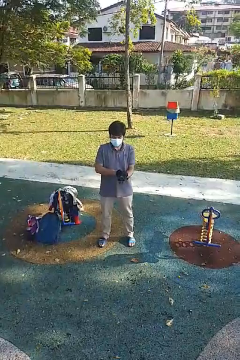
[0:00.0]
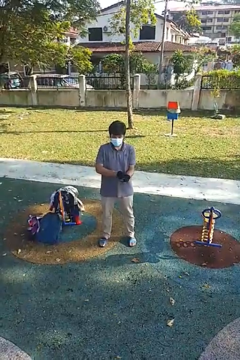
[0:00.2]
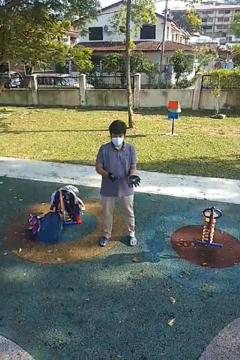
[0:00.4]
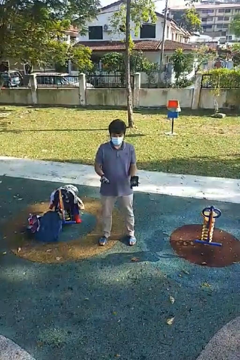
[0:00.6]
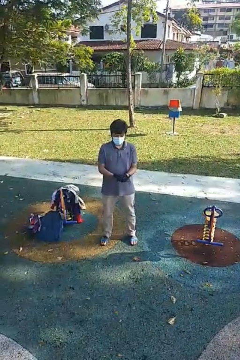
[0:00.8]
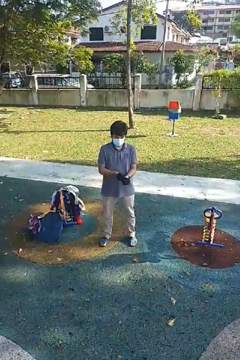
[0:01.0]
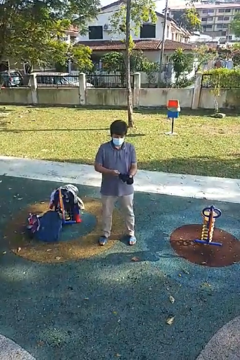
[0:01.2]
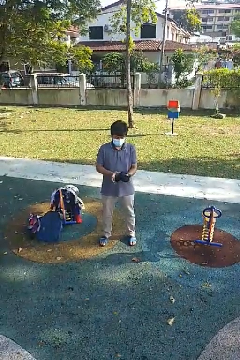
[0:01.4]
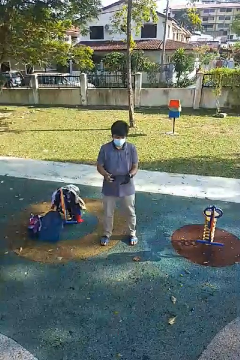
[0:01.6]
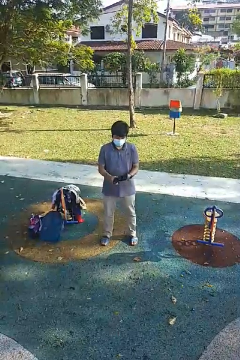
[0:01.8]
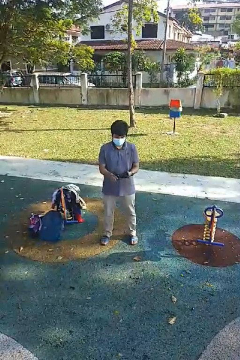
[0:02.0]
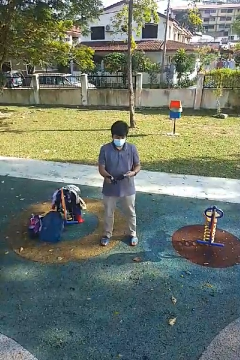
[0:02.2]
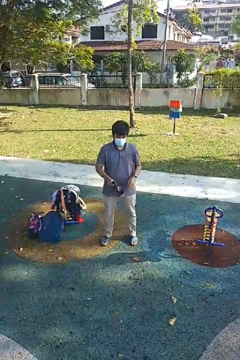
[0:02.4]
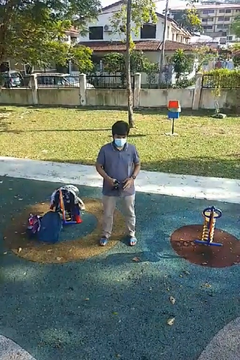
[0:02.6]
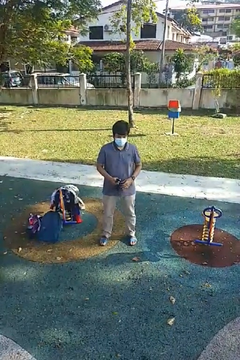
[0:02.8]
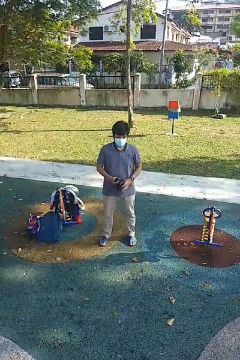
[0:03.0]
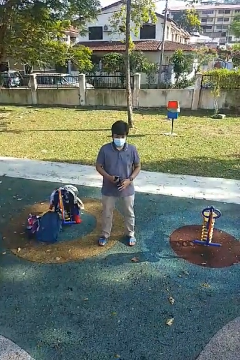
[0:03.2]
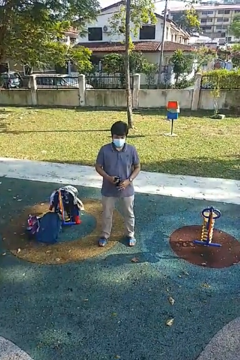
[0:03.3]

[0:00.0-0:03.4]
person takes off gloves

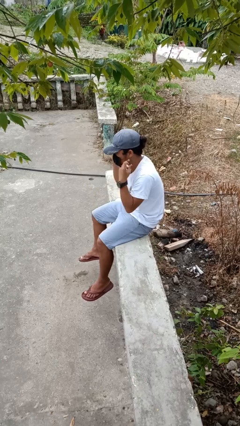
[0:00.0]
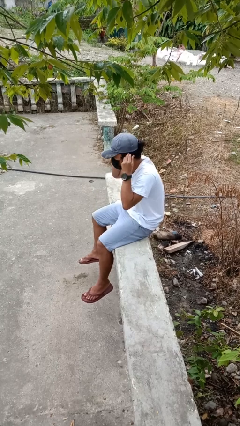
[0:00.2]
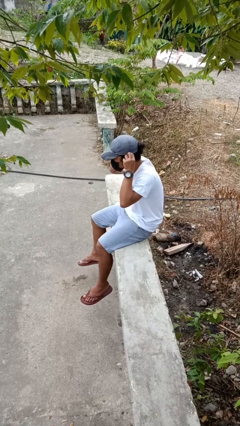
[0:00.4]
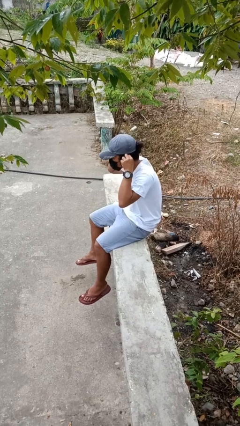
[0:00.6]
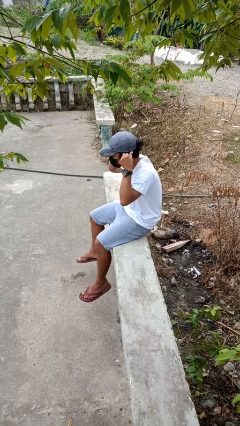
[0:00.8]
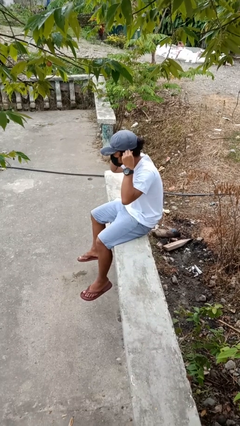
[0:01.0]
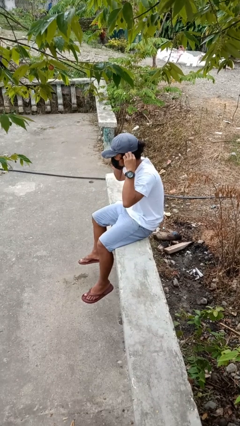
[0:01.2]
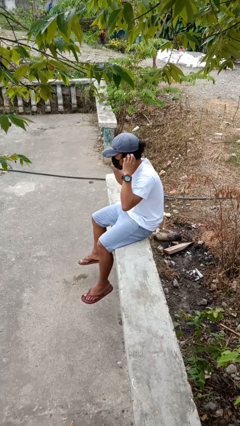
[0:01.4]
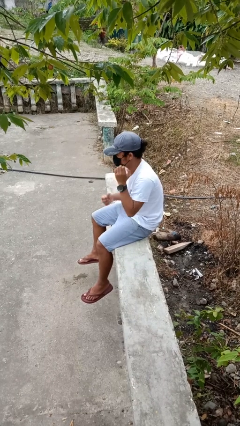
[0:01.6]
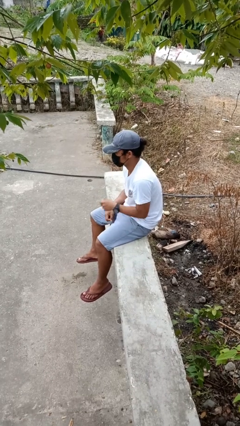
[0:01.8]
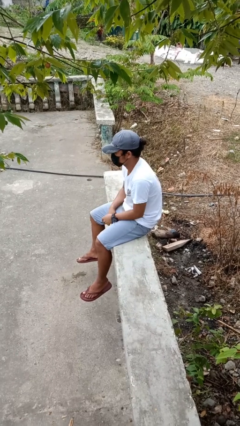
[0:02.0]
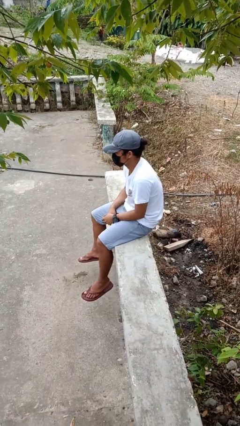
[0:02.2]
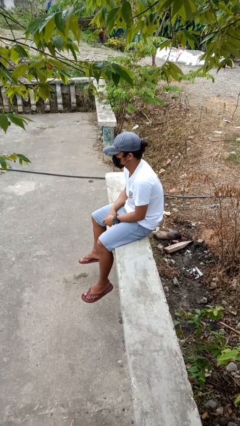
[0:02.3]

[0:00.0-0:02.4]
person puts on facemask

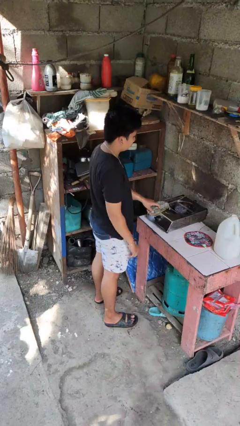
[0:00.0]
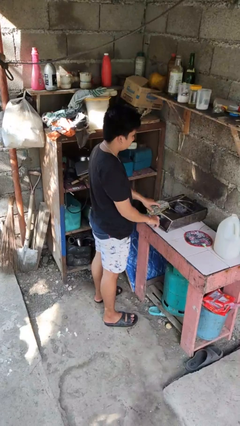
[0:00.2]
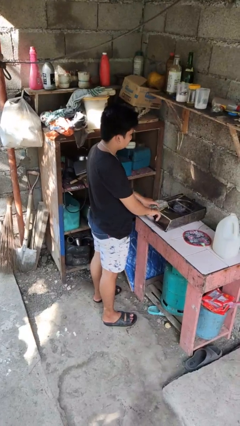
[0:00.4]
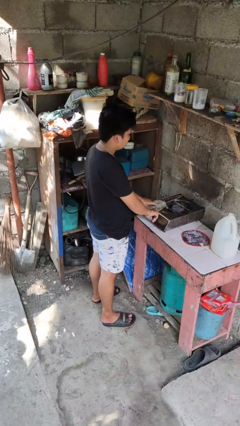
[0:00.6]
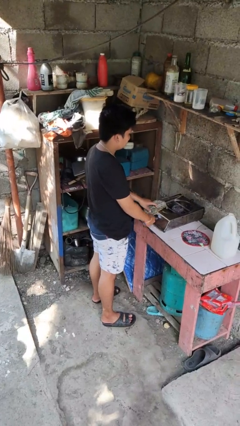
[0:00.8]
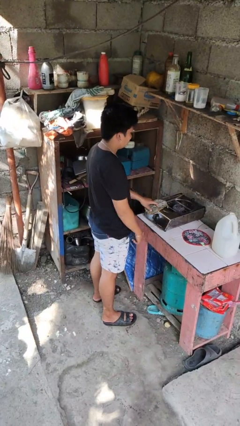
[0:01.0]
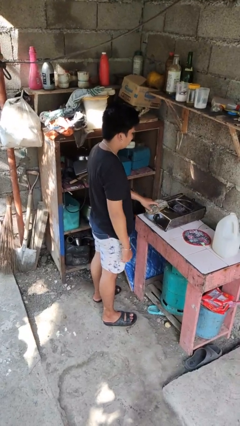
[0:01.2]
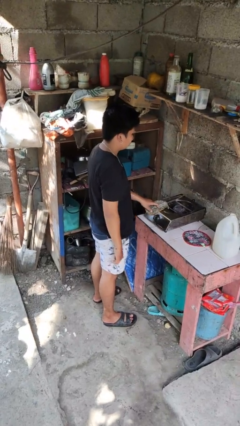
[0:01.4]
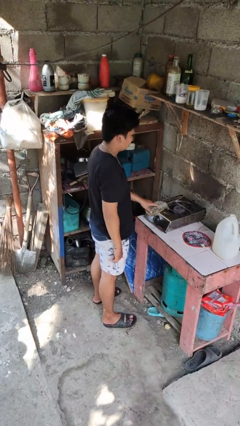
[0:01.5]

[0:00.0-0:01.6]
person turns off stovetop

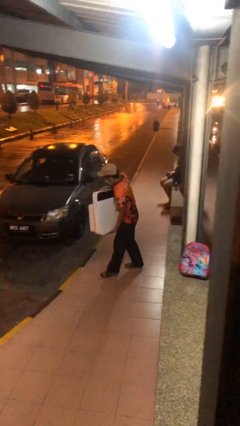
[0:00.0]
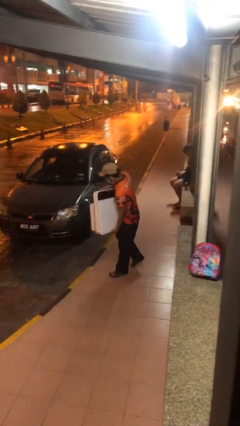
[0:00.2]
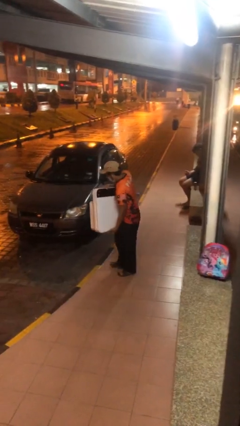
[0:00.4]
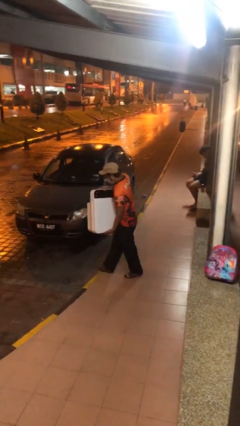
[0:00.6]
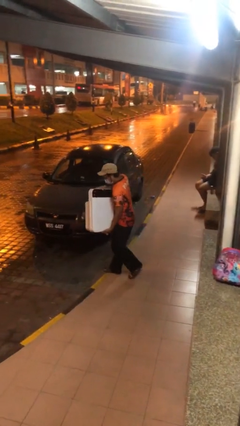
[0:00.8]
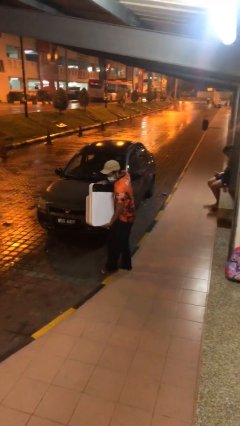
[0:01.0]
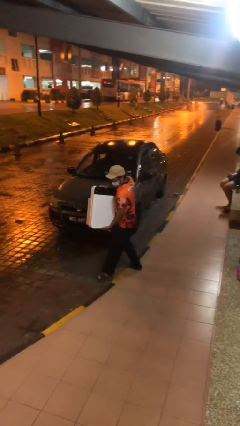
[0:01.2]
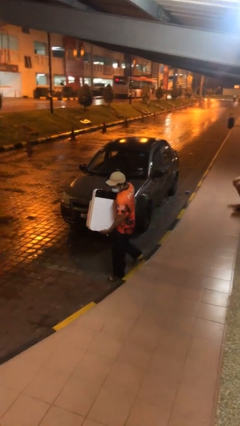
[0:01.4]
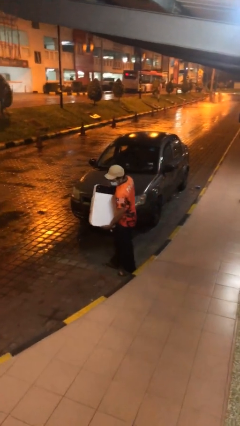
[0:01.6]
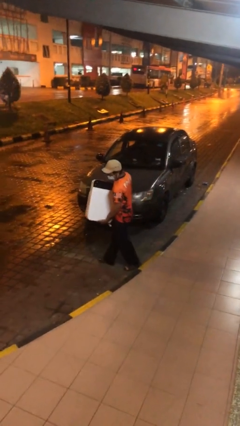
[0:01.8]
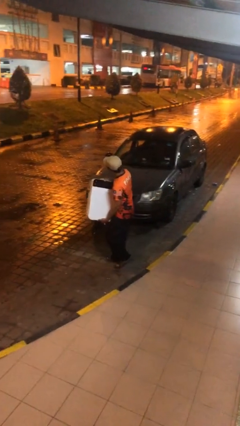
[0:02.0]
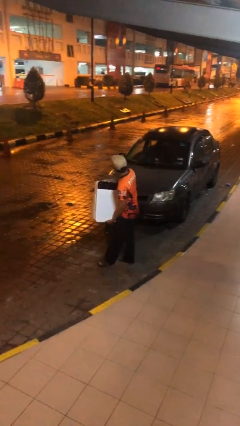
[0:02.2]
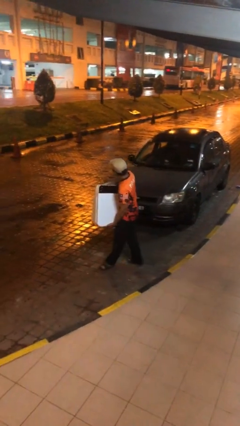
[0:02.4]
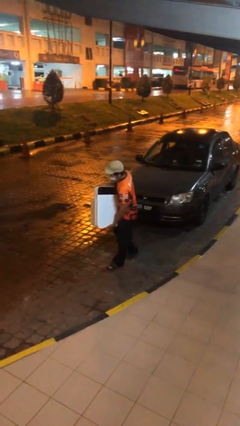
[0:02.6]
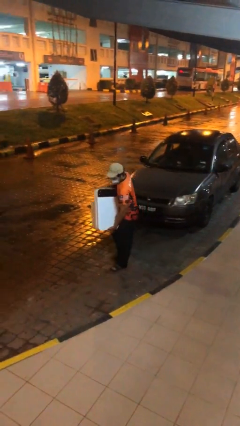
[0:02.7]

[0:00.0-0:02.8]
person carries heavy object

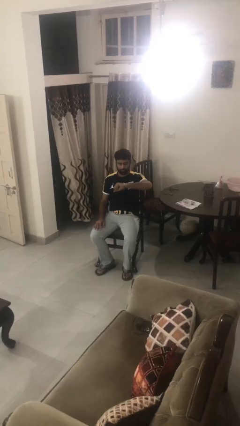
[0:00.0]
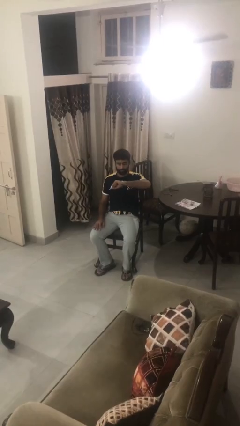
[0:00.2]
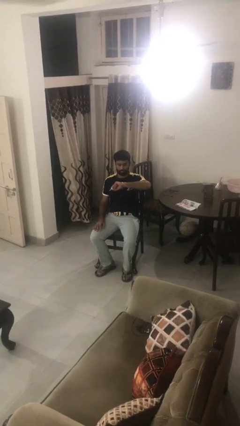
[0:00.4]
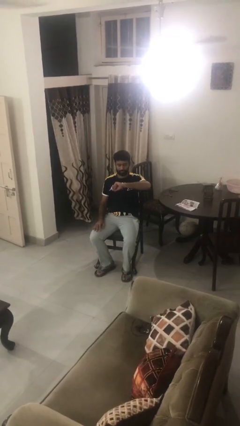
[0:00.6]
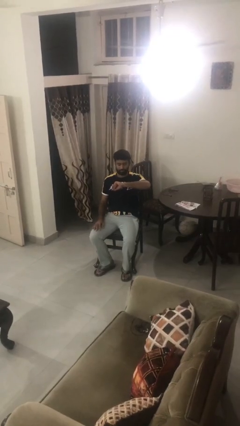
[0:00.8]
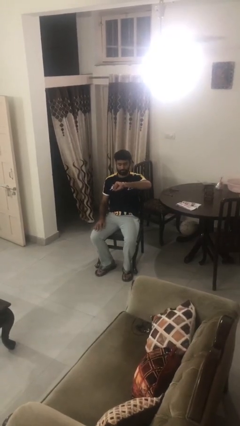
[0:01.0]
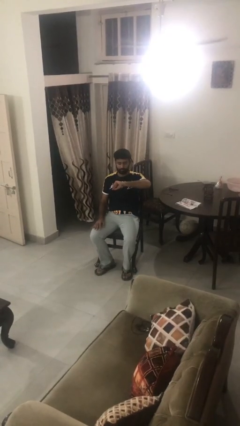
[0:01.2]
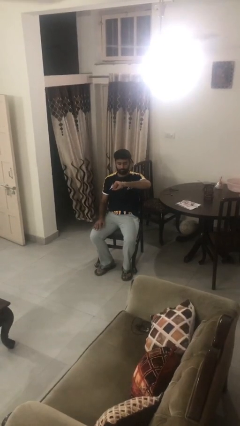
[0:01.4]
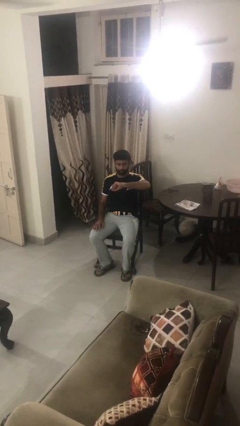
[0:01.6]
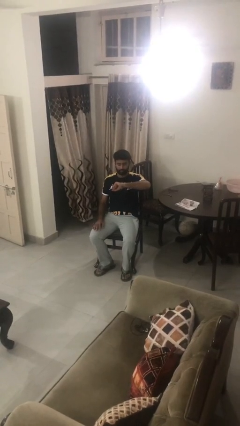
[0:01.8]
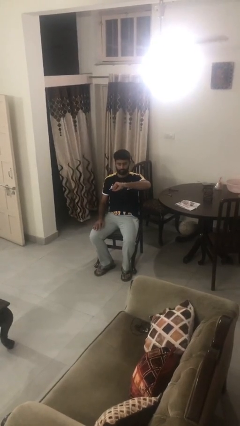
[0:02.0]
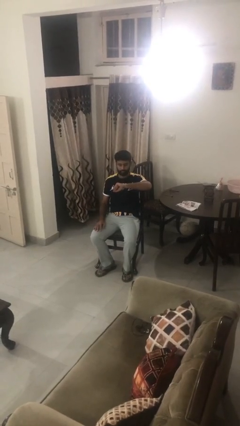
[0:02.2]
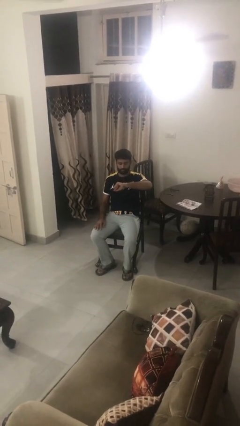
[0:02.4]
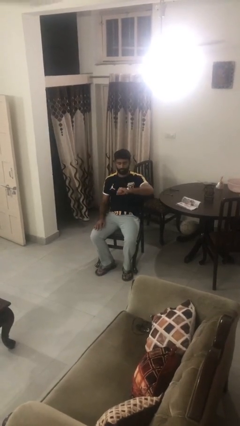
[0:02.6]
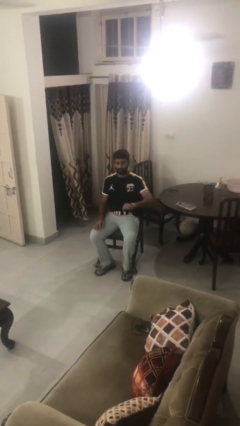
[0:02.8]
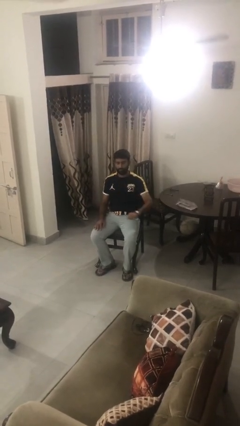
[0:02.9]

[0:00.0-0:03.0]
person looks at wristwatch

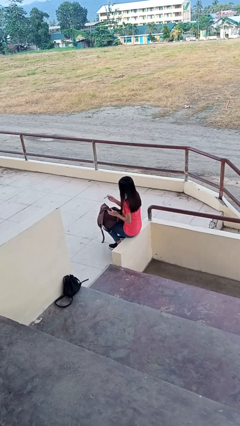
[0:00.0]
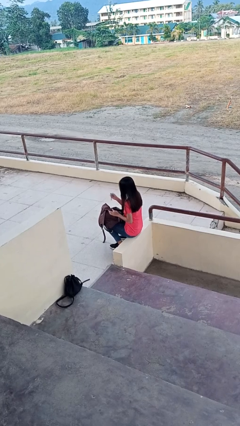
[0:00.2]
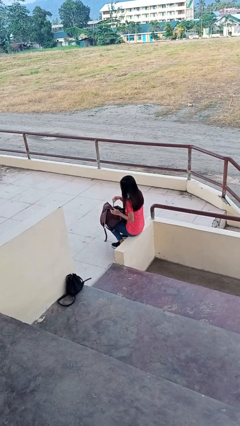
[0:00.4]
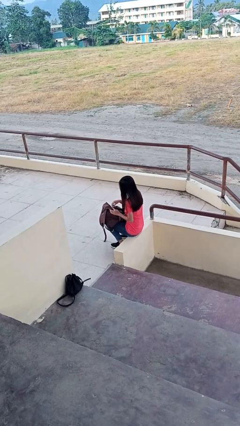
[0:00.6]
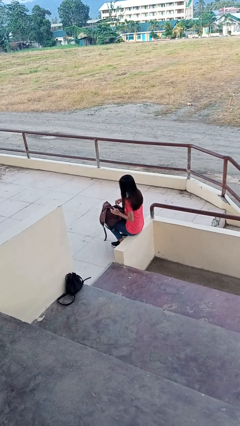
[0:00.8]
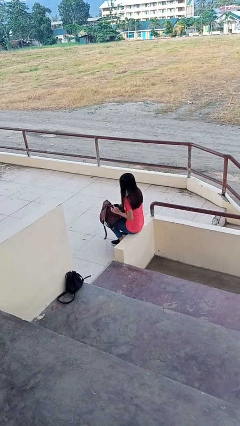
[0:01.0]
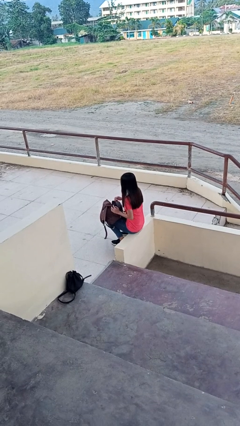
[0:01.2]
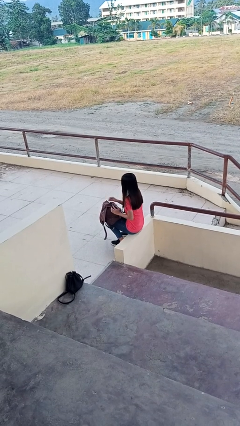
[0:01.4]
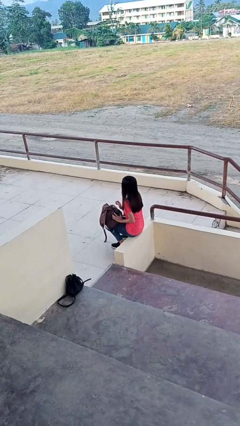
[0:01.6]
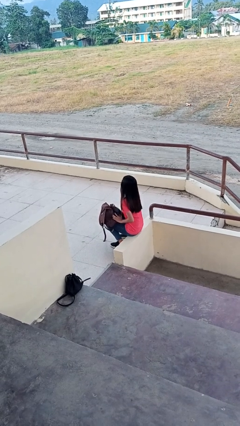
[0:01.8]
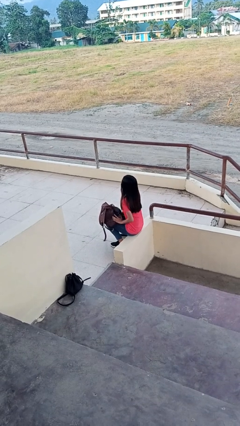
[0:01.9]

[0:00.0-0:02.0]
person puts object into backpack

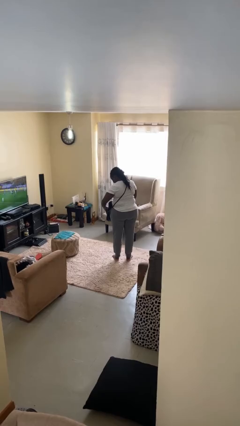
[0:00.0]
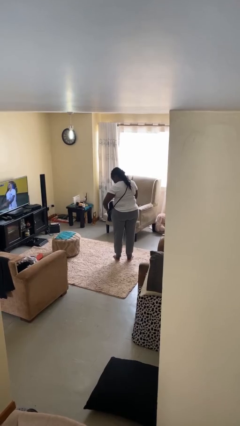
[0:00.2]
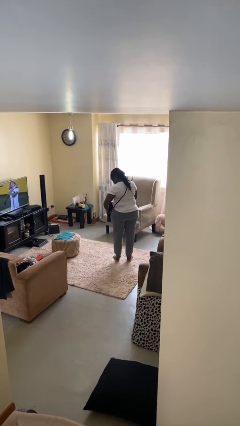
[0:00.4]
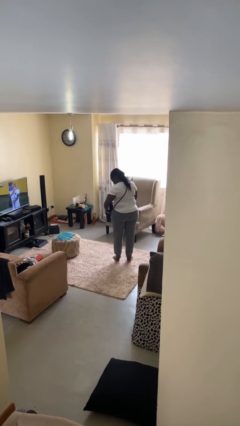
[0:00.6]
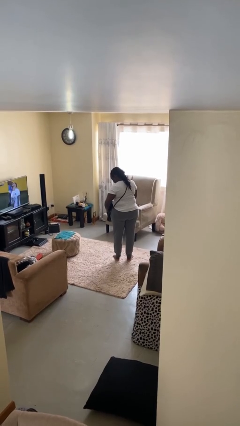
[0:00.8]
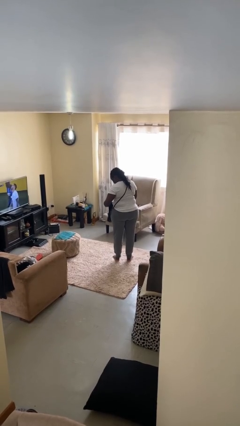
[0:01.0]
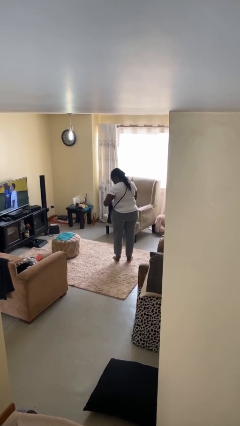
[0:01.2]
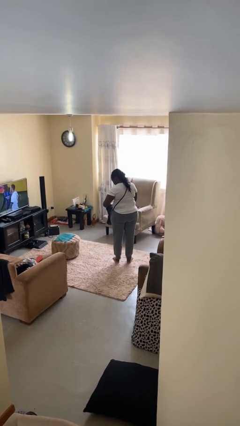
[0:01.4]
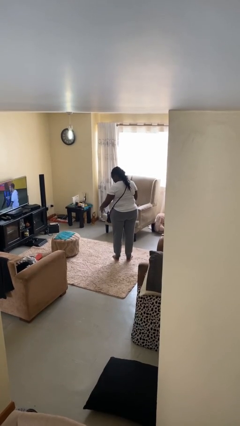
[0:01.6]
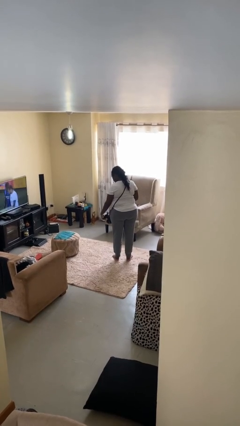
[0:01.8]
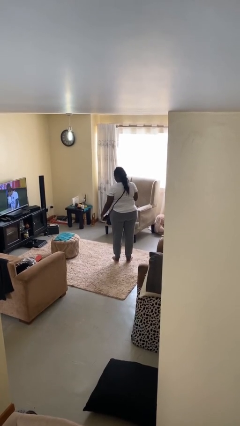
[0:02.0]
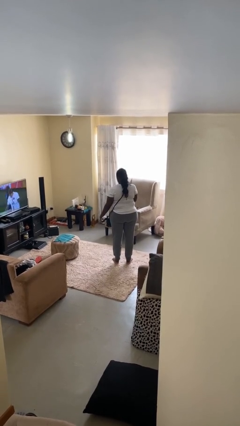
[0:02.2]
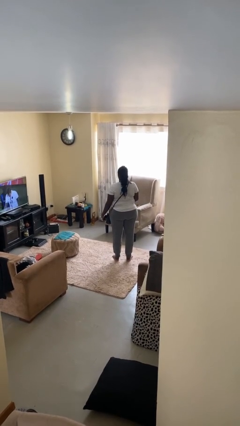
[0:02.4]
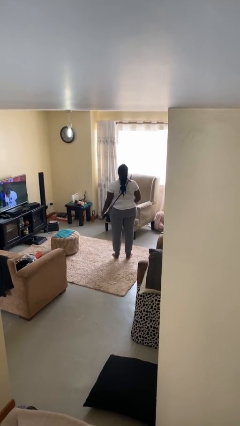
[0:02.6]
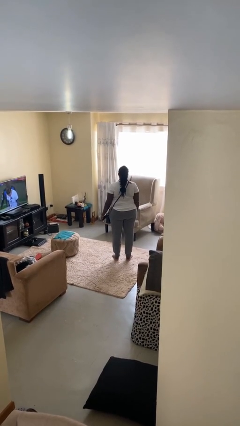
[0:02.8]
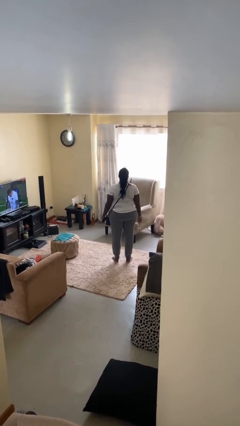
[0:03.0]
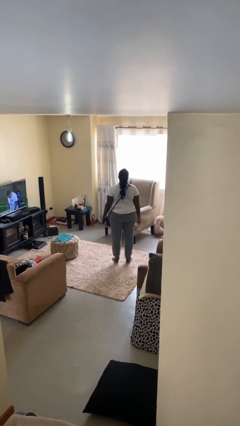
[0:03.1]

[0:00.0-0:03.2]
person puts object into purse
